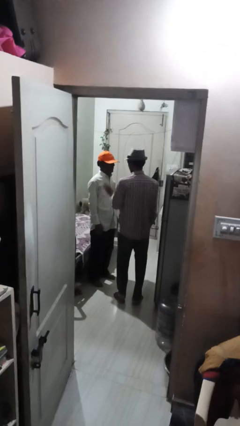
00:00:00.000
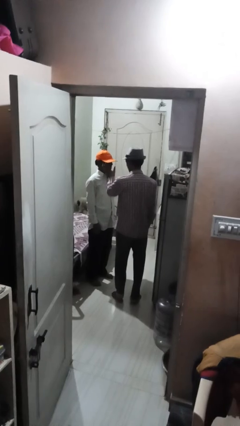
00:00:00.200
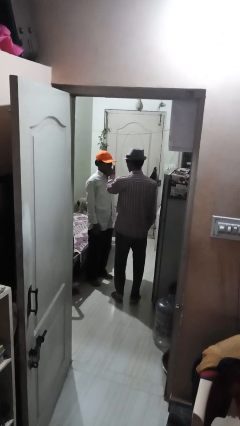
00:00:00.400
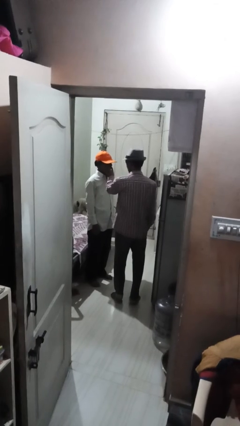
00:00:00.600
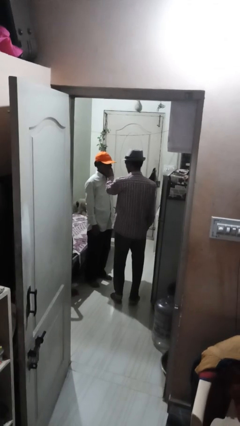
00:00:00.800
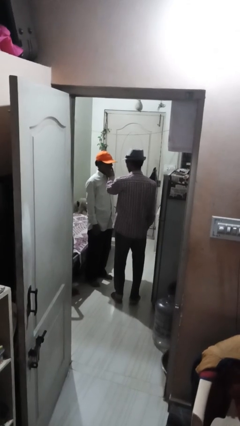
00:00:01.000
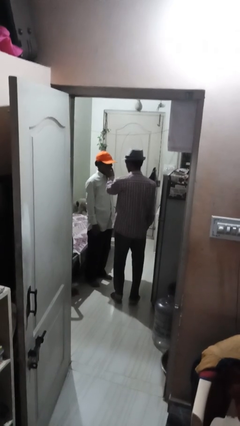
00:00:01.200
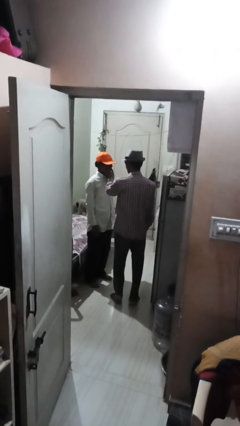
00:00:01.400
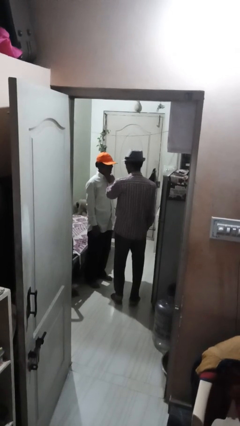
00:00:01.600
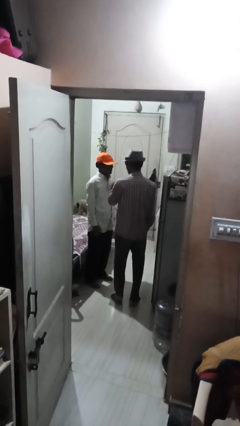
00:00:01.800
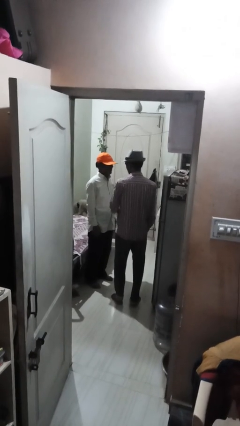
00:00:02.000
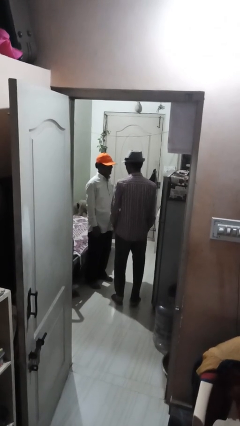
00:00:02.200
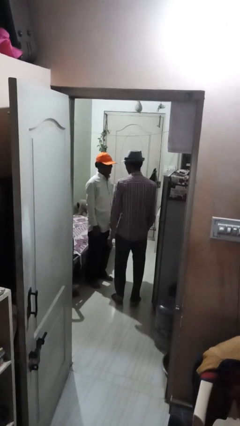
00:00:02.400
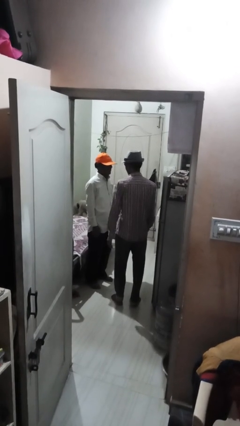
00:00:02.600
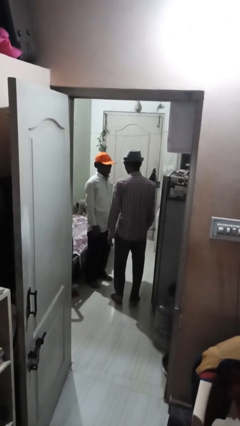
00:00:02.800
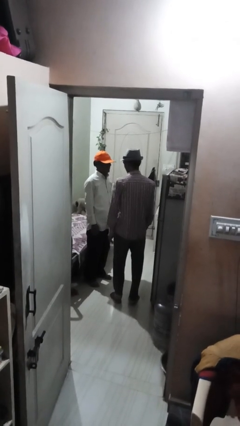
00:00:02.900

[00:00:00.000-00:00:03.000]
person touches face of person

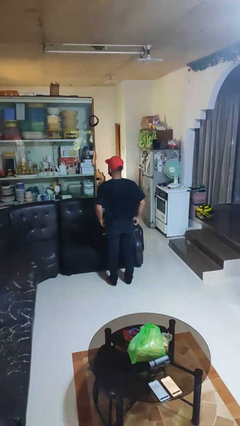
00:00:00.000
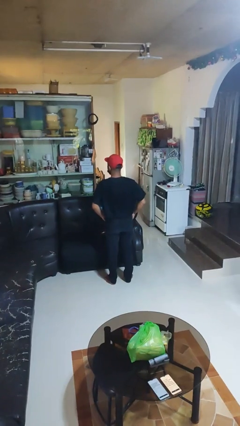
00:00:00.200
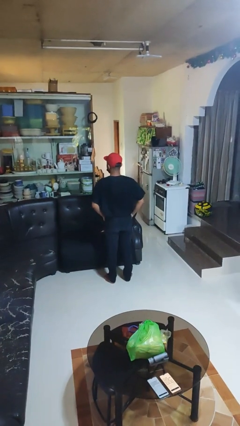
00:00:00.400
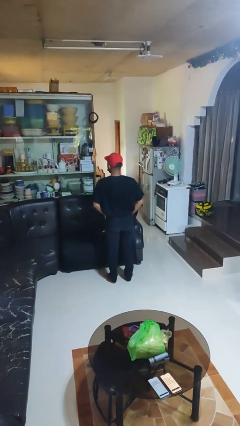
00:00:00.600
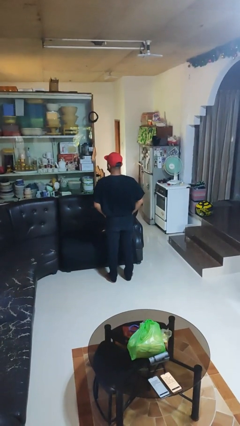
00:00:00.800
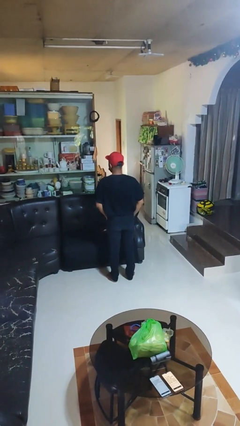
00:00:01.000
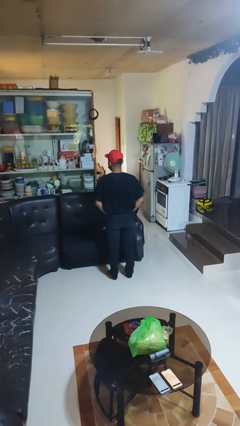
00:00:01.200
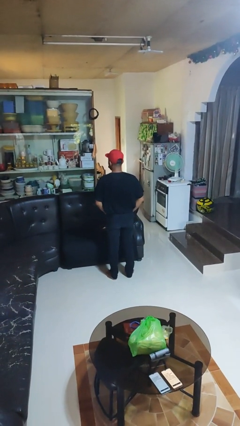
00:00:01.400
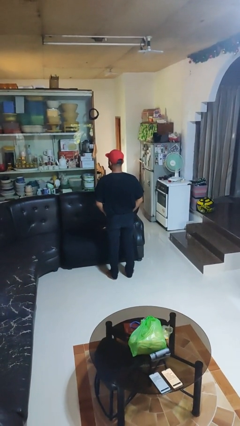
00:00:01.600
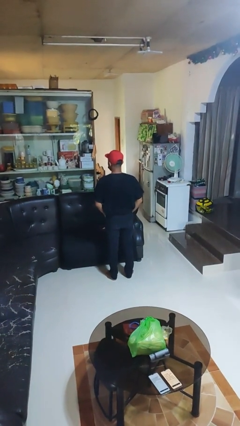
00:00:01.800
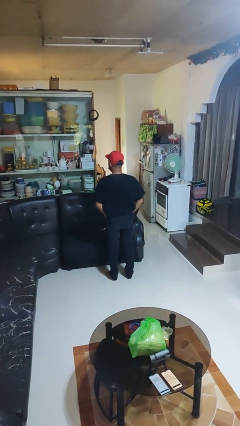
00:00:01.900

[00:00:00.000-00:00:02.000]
person puts on shirt

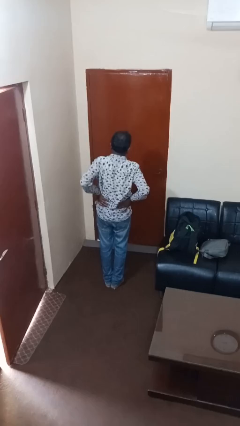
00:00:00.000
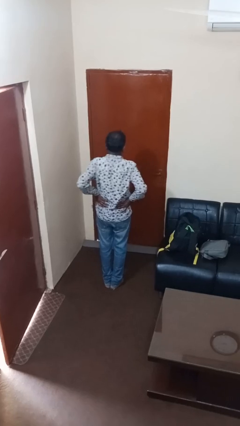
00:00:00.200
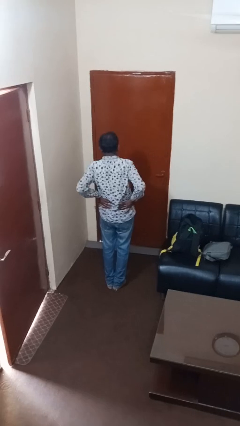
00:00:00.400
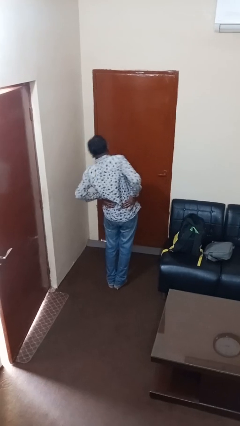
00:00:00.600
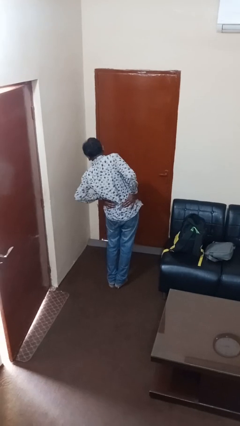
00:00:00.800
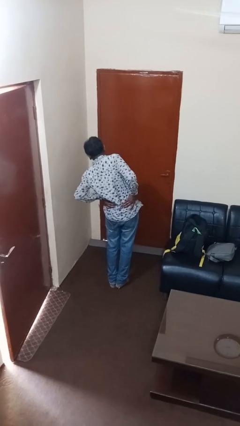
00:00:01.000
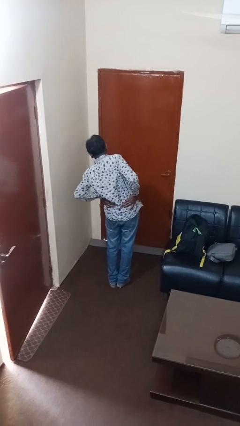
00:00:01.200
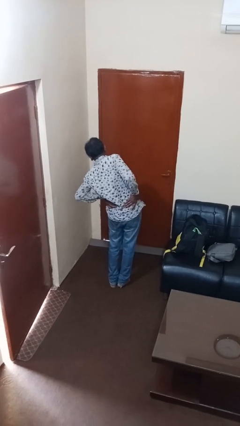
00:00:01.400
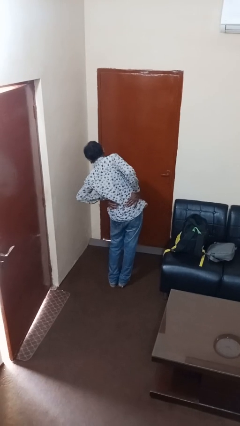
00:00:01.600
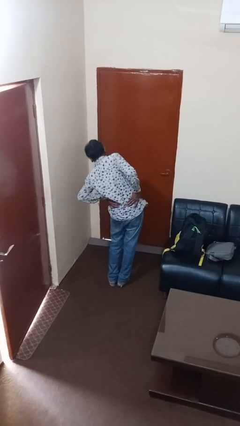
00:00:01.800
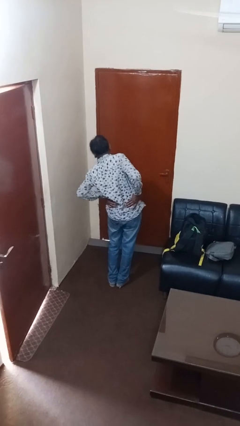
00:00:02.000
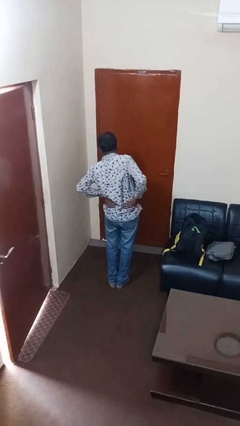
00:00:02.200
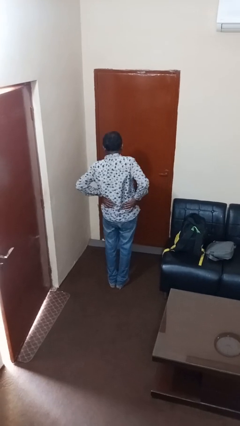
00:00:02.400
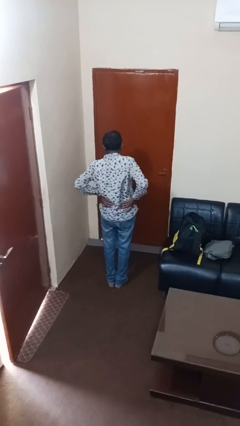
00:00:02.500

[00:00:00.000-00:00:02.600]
person stretches arms over head

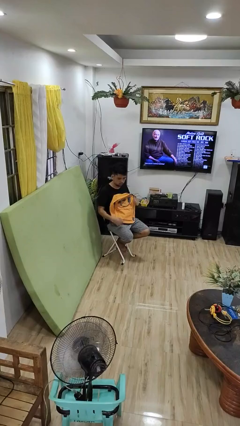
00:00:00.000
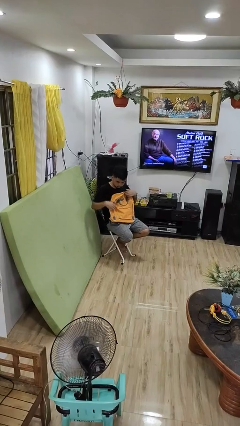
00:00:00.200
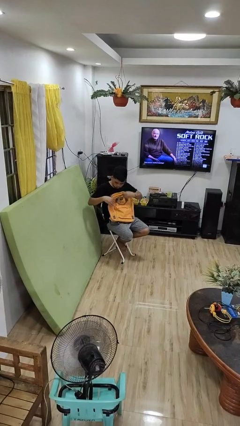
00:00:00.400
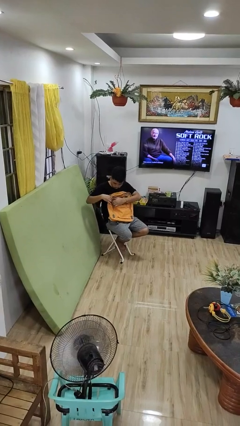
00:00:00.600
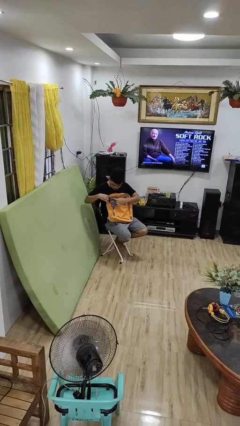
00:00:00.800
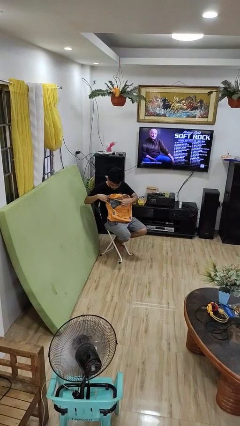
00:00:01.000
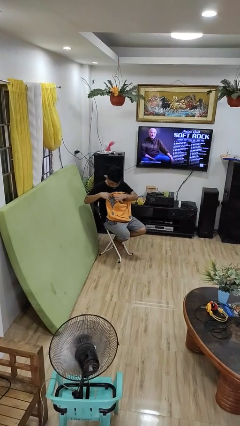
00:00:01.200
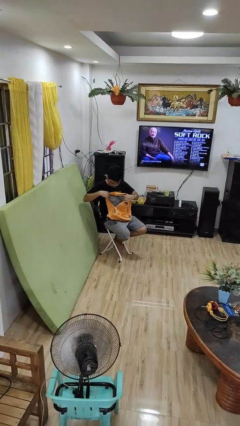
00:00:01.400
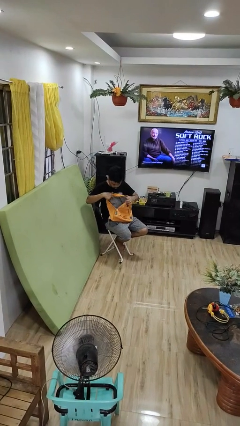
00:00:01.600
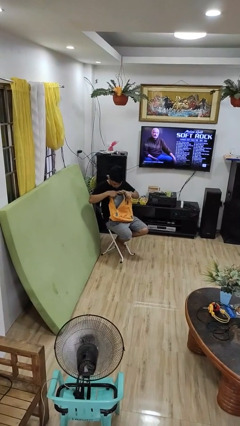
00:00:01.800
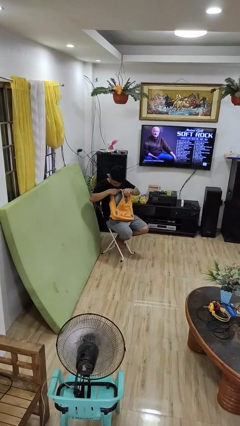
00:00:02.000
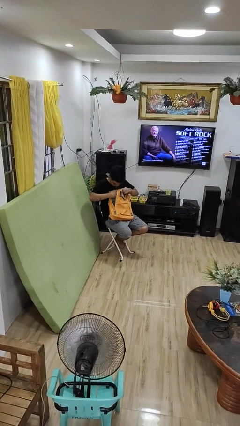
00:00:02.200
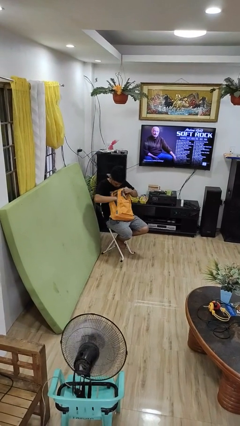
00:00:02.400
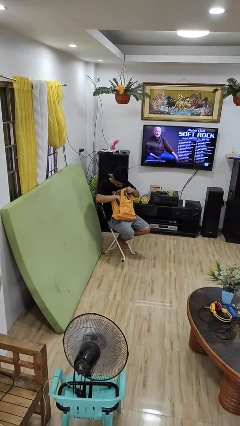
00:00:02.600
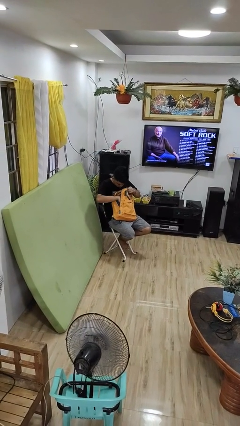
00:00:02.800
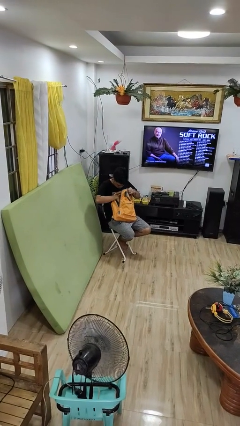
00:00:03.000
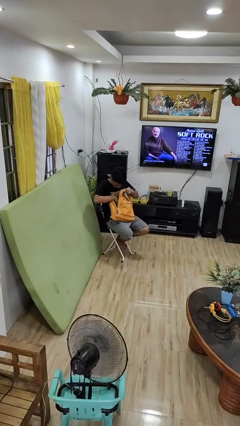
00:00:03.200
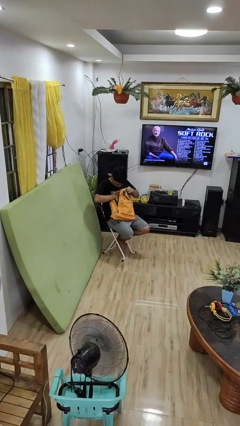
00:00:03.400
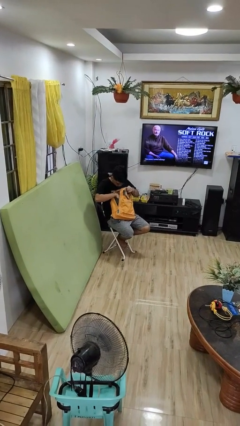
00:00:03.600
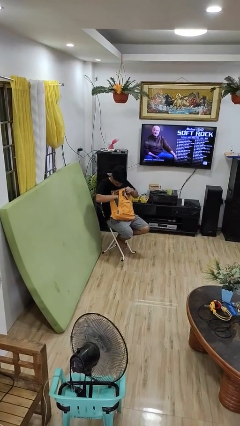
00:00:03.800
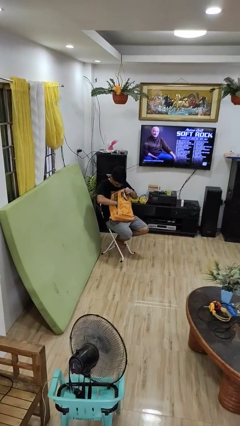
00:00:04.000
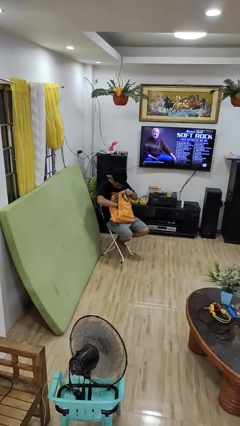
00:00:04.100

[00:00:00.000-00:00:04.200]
person searches in backpack

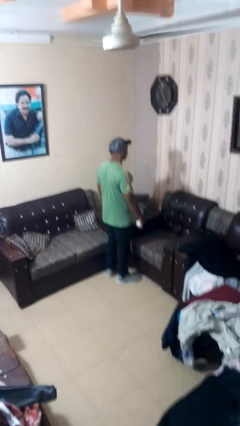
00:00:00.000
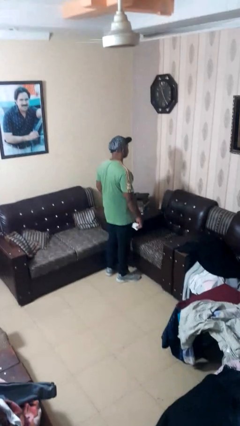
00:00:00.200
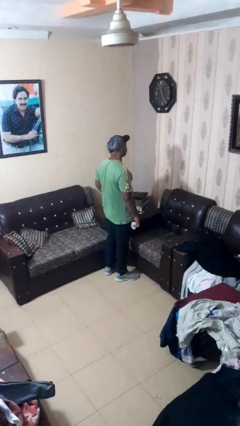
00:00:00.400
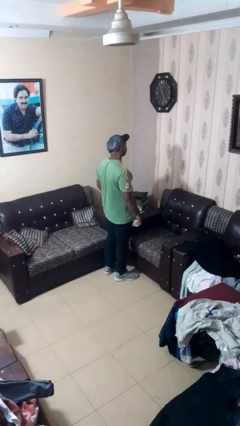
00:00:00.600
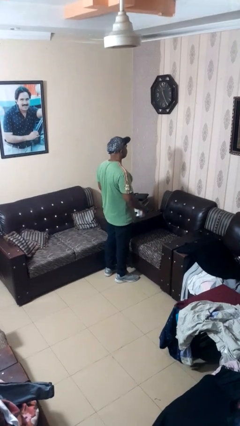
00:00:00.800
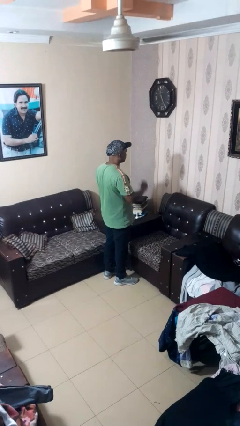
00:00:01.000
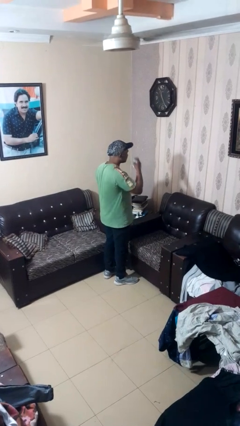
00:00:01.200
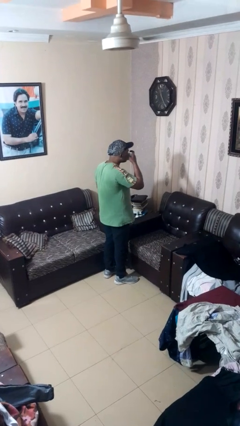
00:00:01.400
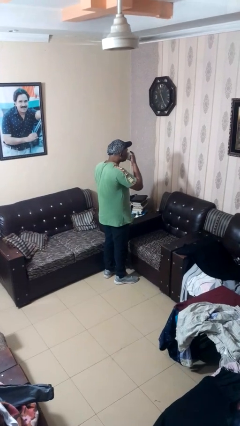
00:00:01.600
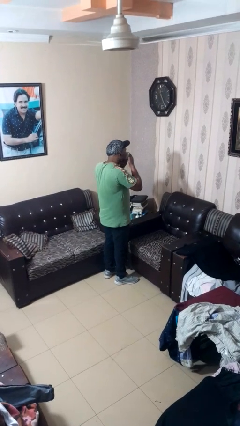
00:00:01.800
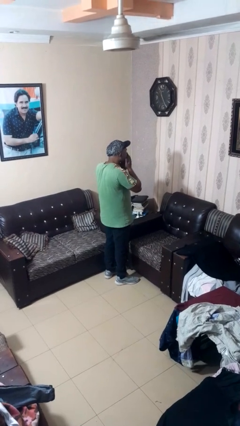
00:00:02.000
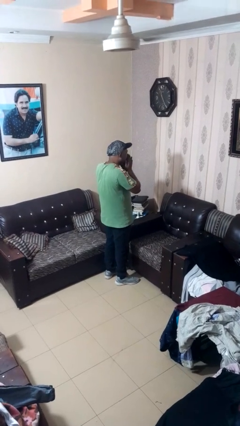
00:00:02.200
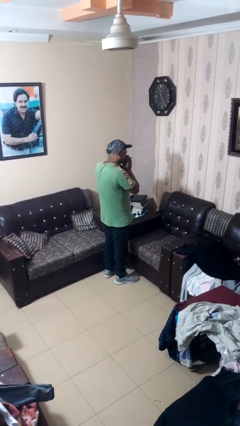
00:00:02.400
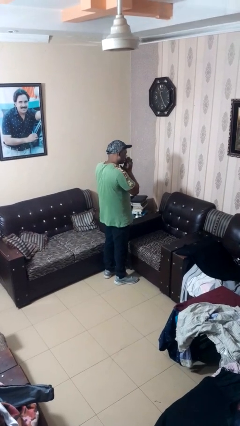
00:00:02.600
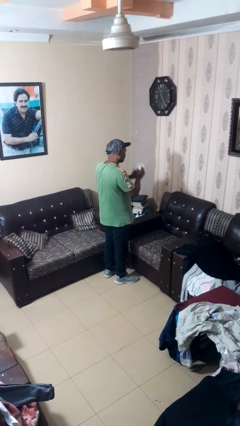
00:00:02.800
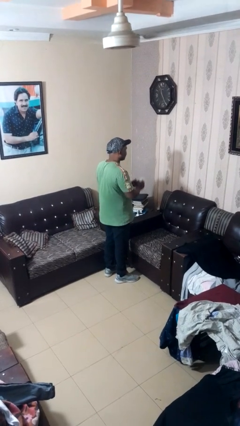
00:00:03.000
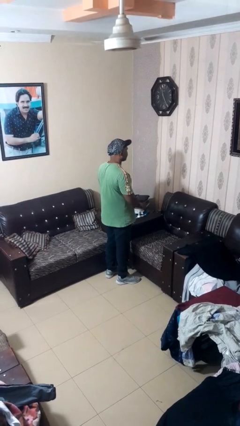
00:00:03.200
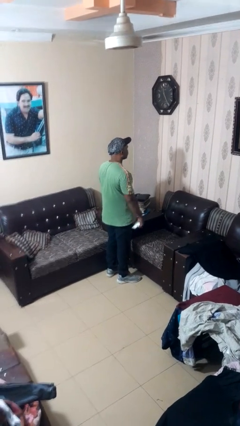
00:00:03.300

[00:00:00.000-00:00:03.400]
person blows nose

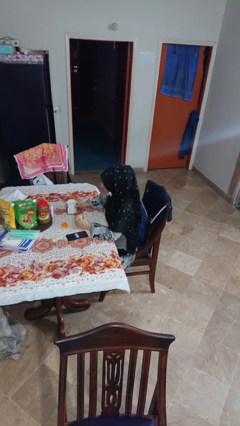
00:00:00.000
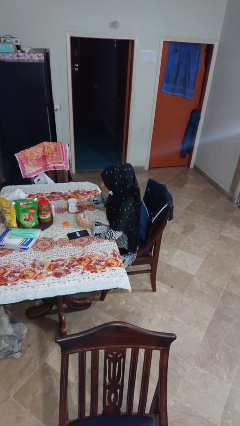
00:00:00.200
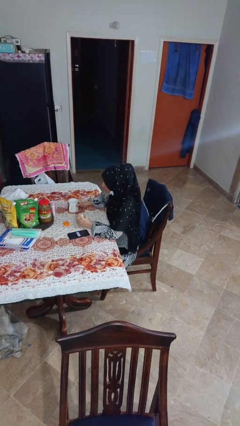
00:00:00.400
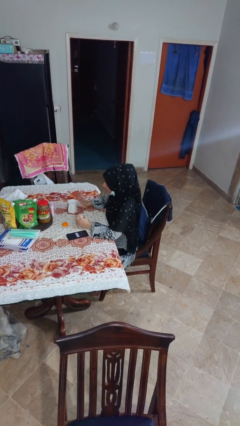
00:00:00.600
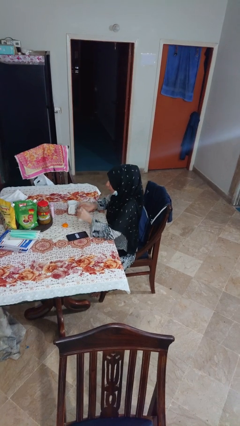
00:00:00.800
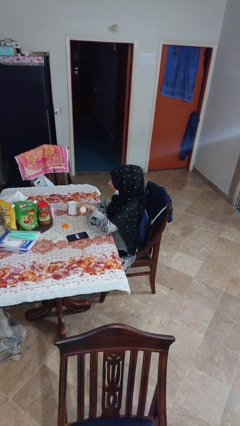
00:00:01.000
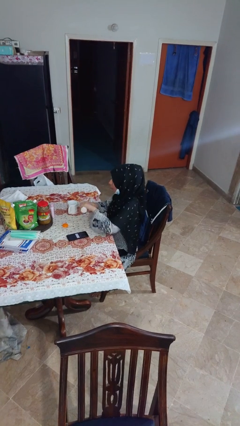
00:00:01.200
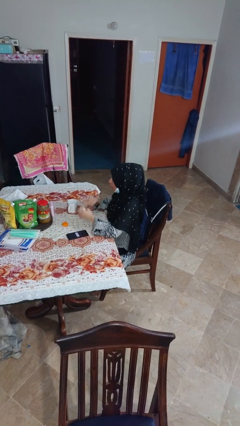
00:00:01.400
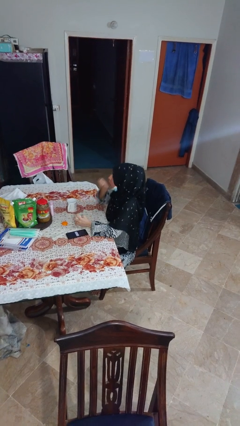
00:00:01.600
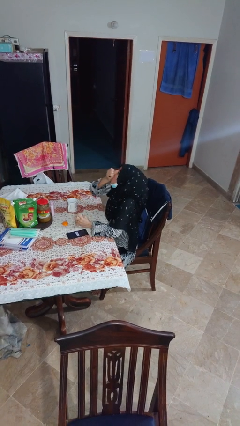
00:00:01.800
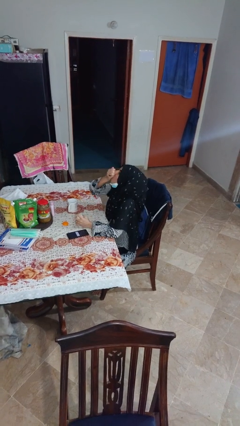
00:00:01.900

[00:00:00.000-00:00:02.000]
person takes medicine pills

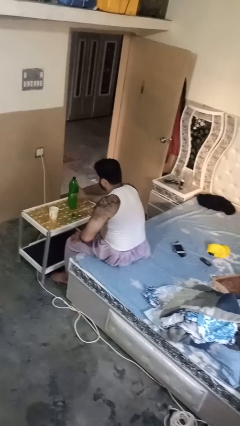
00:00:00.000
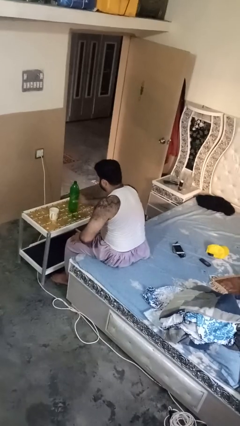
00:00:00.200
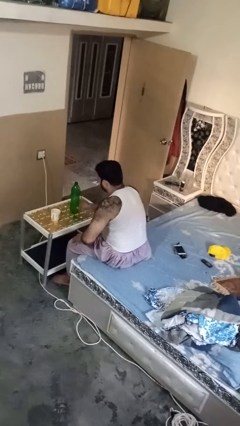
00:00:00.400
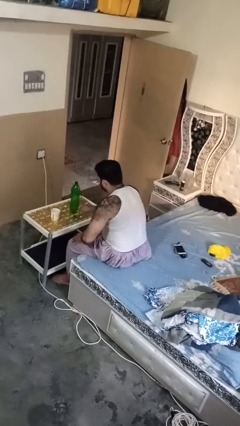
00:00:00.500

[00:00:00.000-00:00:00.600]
person screws lid to bottle
